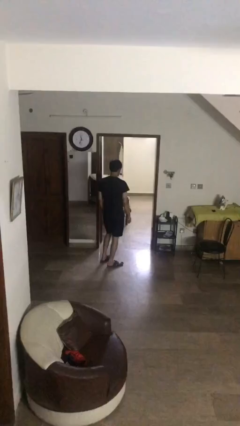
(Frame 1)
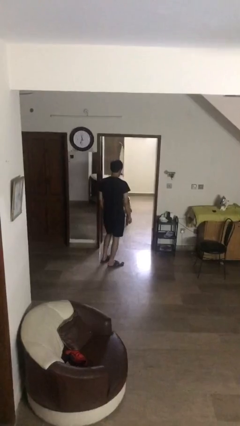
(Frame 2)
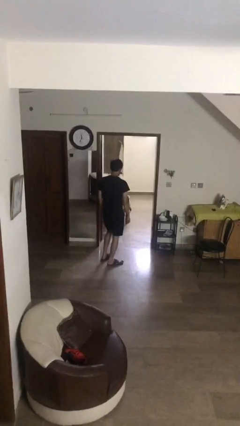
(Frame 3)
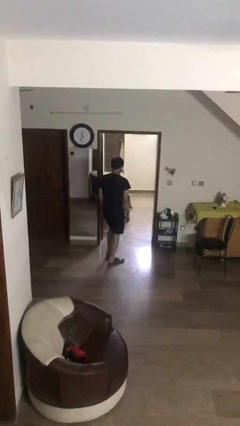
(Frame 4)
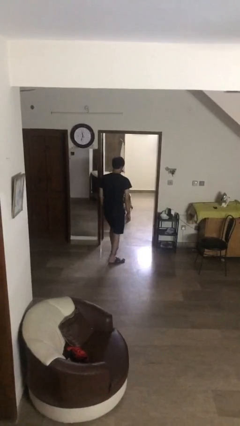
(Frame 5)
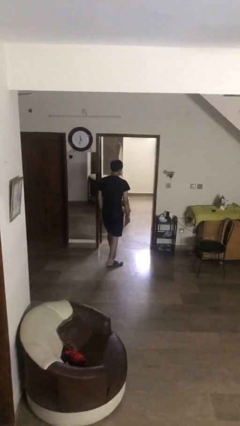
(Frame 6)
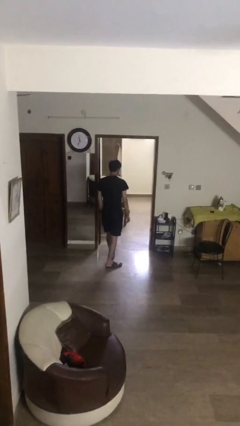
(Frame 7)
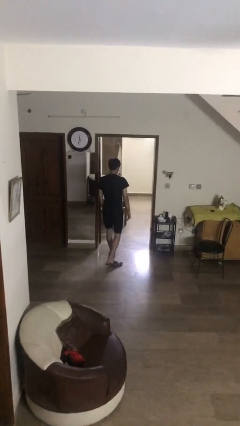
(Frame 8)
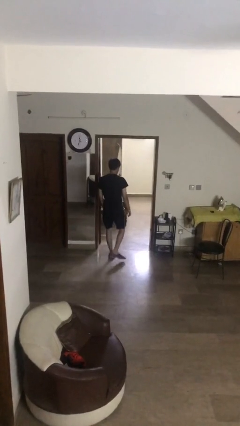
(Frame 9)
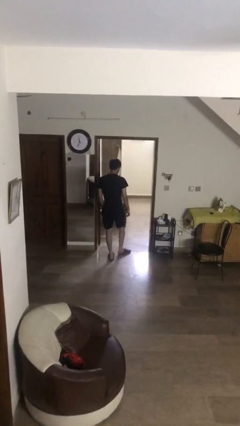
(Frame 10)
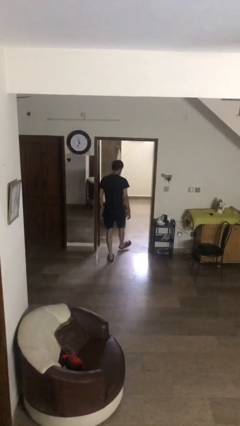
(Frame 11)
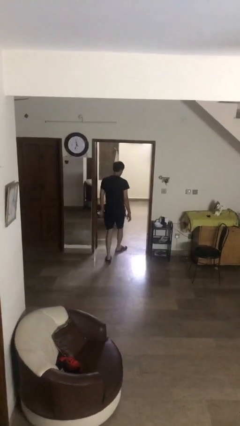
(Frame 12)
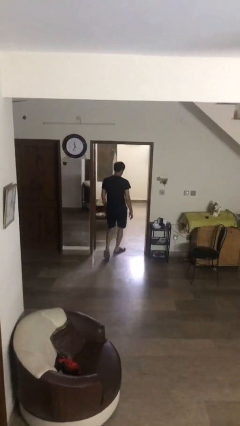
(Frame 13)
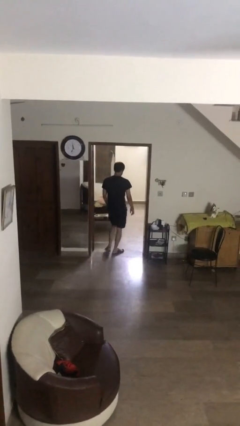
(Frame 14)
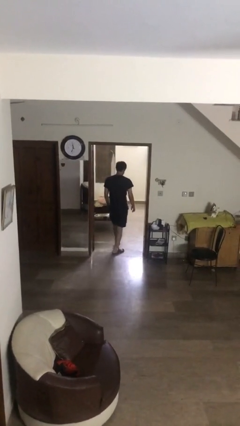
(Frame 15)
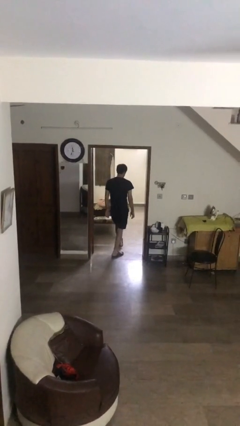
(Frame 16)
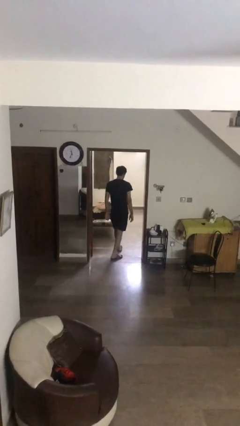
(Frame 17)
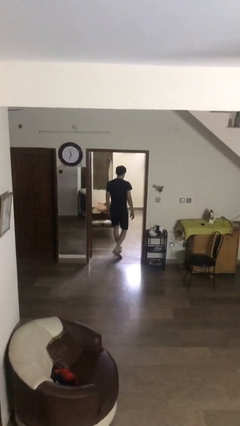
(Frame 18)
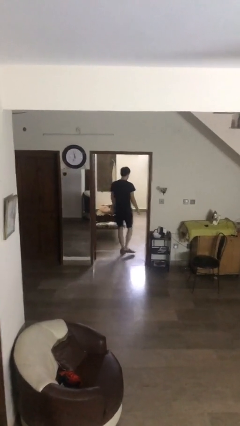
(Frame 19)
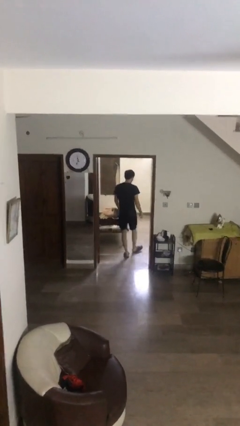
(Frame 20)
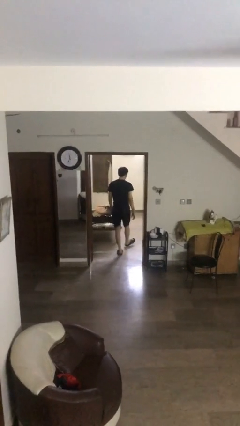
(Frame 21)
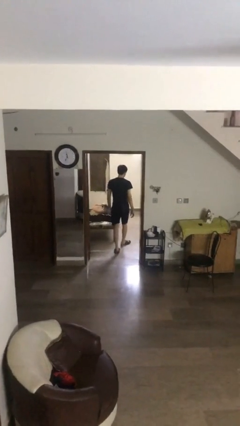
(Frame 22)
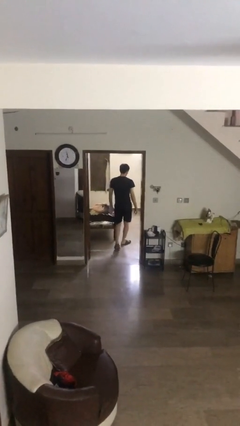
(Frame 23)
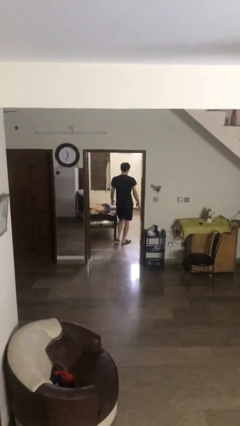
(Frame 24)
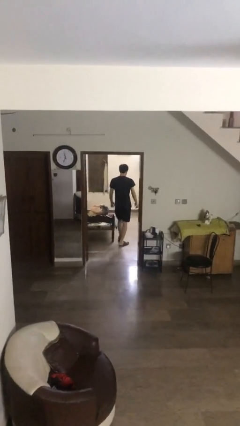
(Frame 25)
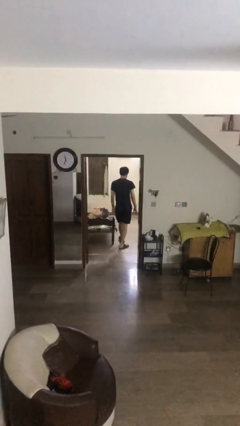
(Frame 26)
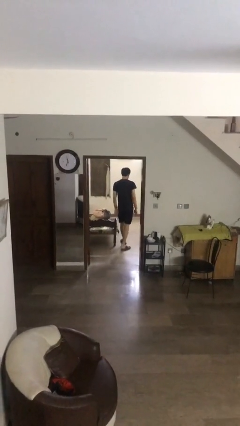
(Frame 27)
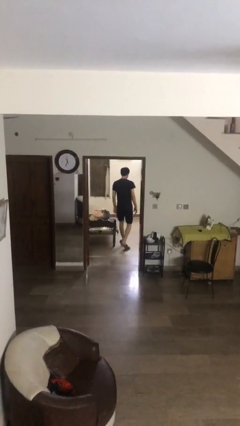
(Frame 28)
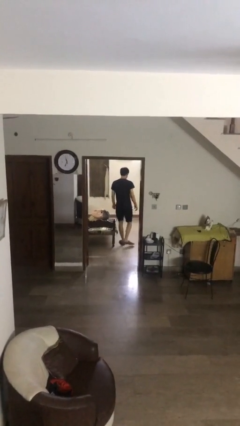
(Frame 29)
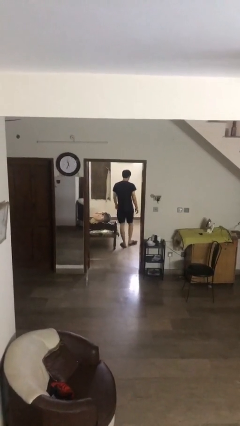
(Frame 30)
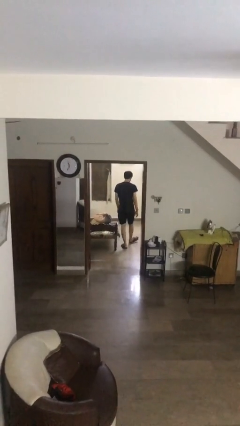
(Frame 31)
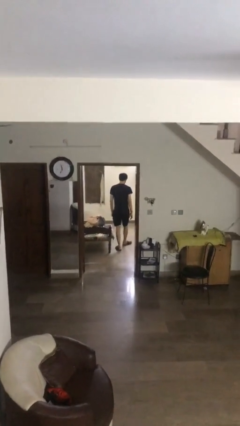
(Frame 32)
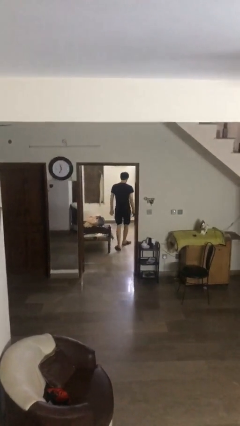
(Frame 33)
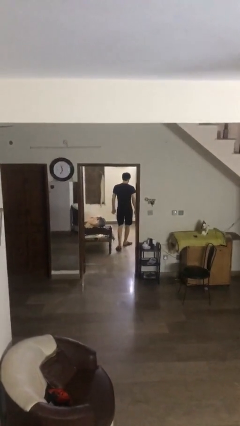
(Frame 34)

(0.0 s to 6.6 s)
person exits scene through structure

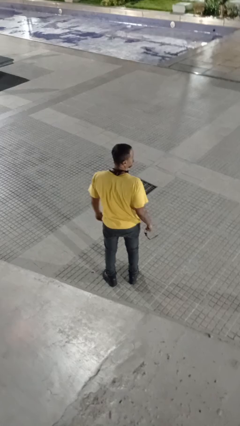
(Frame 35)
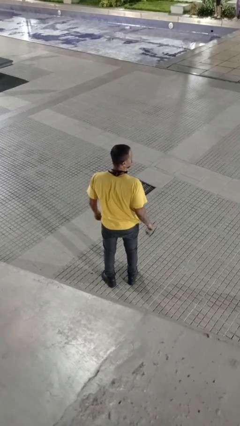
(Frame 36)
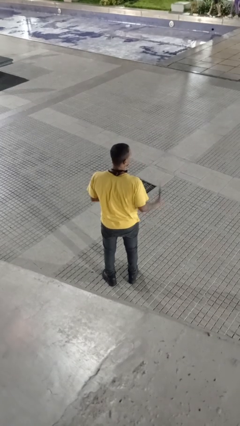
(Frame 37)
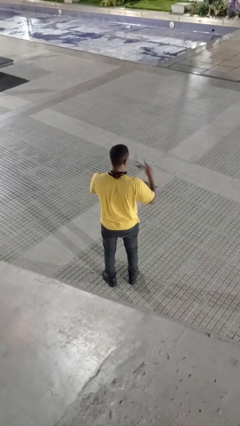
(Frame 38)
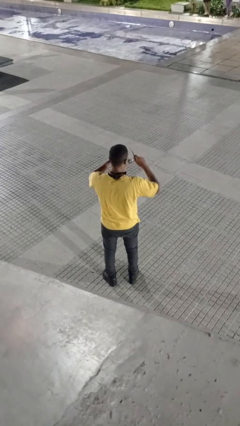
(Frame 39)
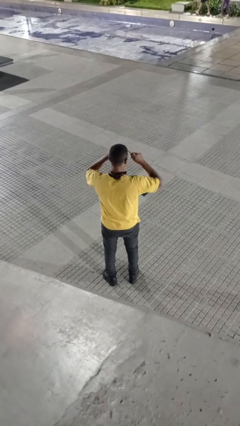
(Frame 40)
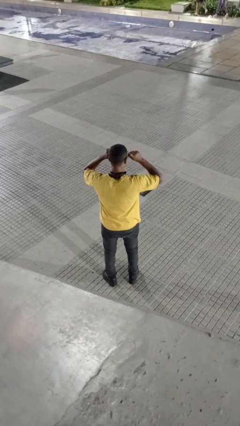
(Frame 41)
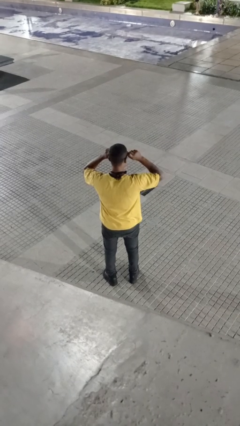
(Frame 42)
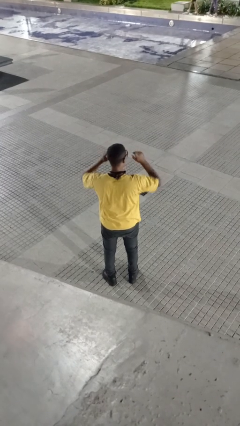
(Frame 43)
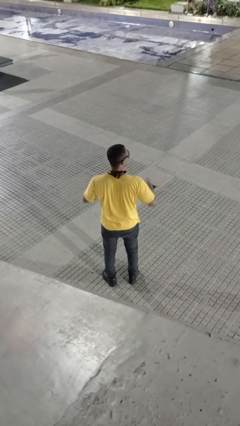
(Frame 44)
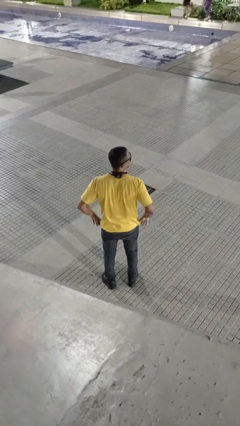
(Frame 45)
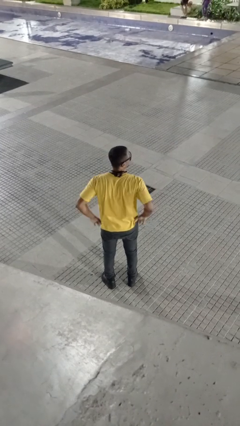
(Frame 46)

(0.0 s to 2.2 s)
person puts on glasses

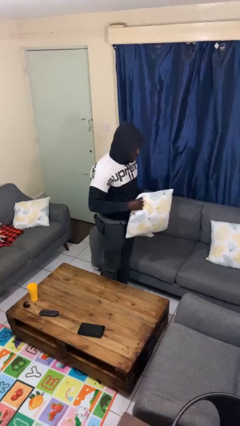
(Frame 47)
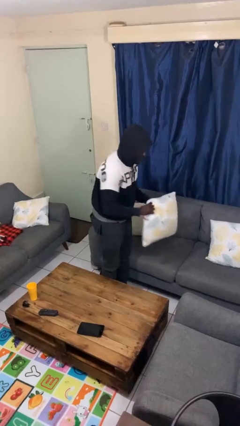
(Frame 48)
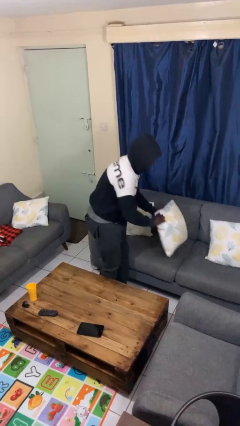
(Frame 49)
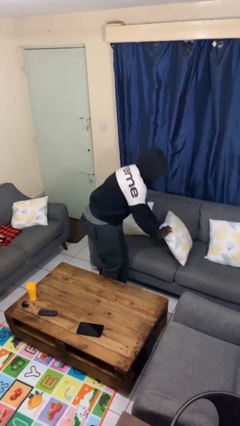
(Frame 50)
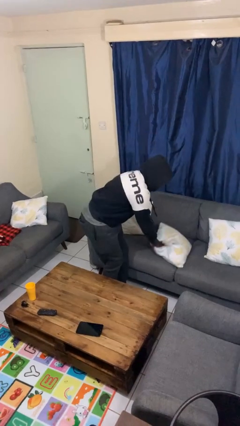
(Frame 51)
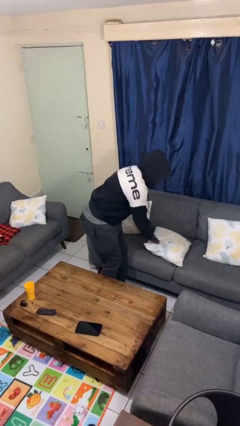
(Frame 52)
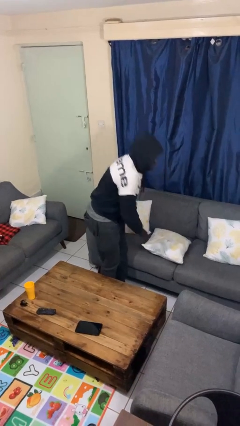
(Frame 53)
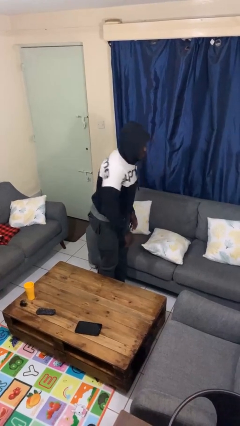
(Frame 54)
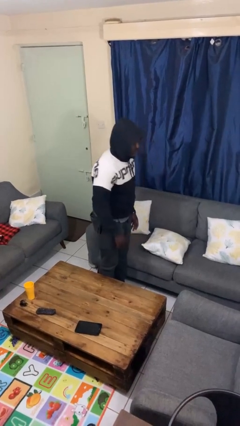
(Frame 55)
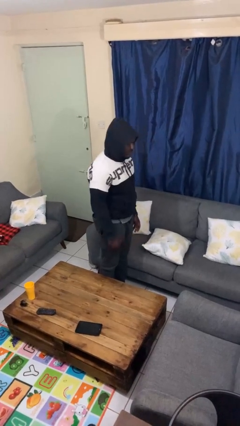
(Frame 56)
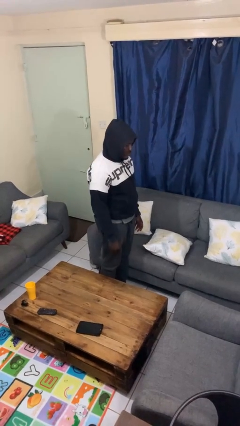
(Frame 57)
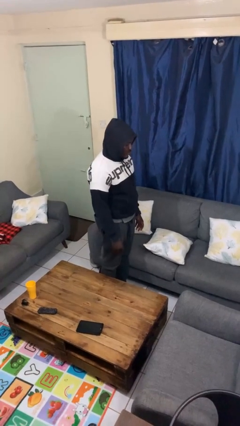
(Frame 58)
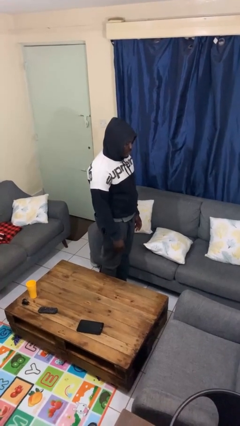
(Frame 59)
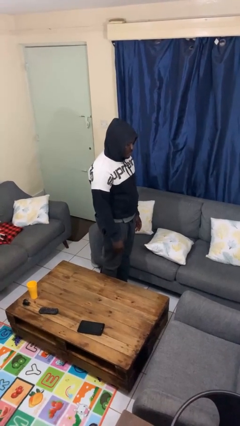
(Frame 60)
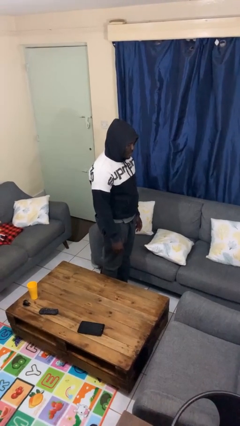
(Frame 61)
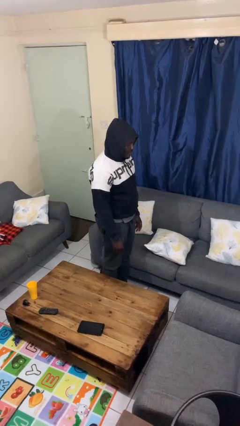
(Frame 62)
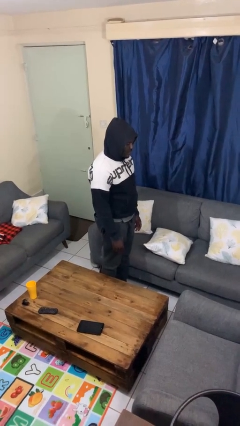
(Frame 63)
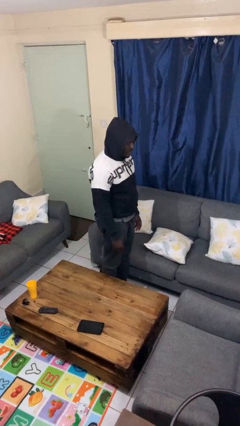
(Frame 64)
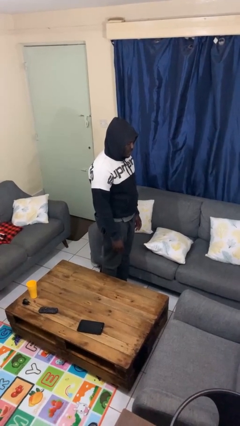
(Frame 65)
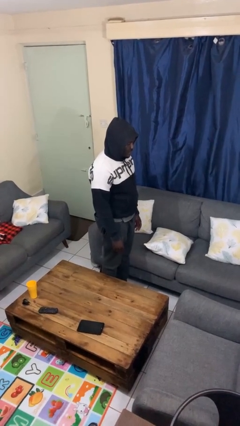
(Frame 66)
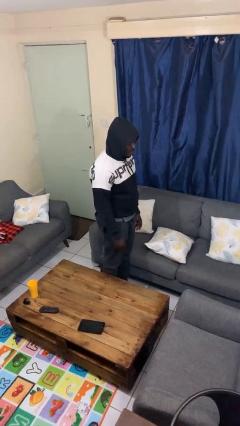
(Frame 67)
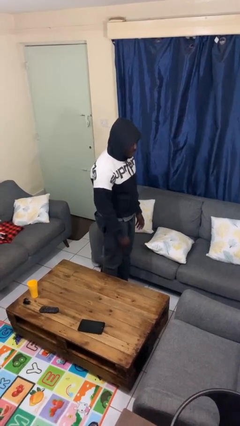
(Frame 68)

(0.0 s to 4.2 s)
person puts down object on couch

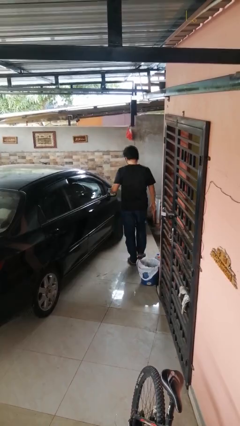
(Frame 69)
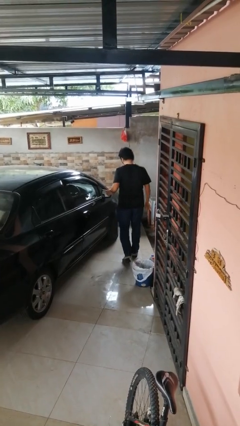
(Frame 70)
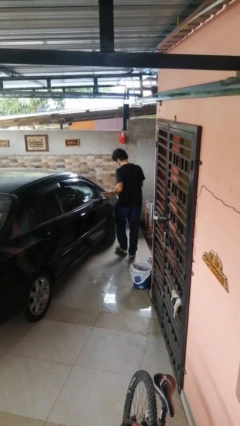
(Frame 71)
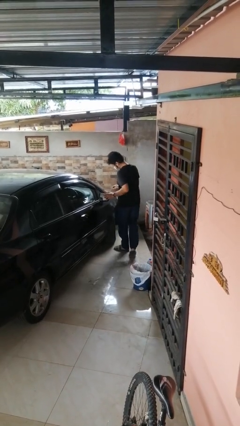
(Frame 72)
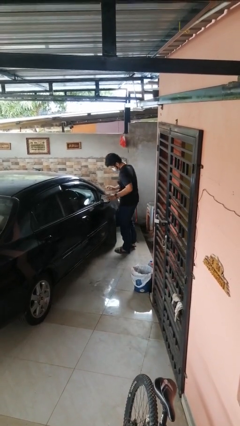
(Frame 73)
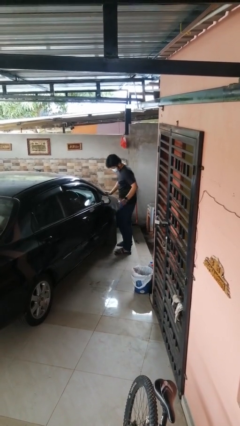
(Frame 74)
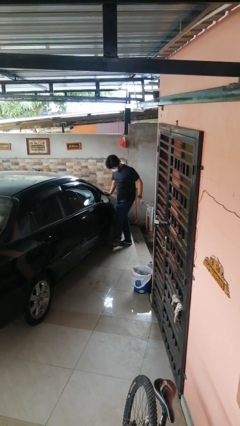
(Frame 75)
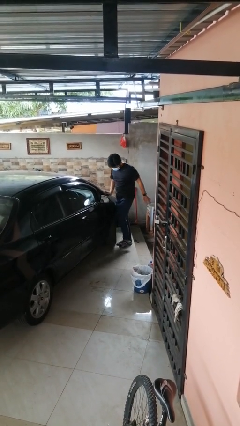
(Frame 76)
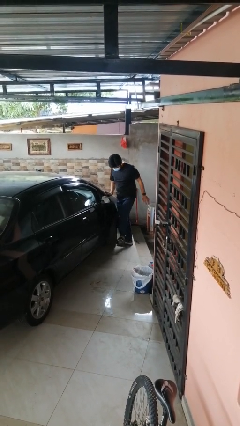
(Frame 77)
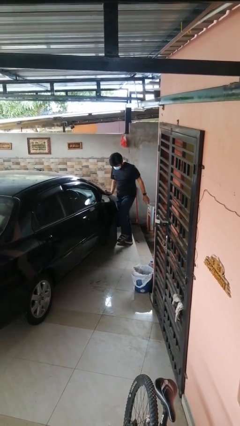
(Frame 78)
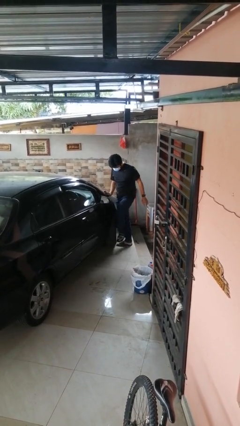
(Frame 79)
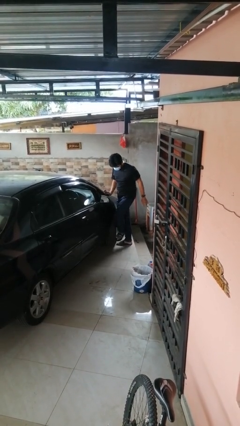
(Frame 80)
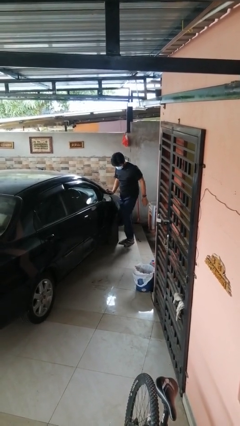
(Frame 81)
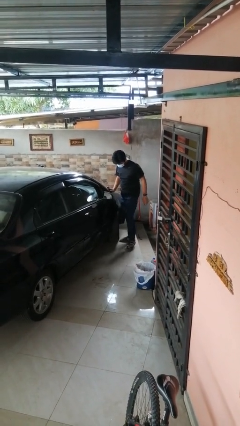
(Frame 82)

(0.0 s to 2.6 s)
person kicks car tires

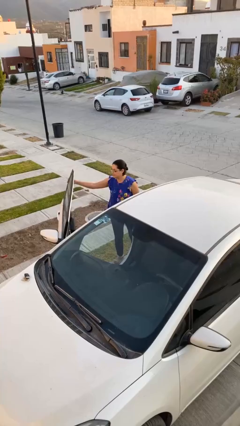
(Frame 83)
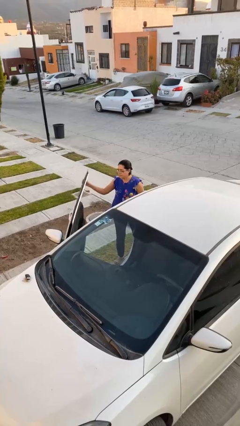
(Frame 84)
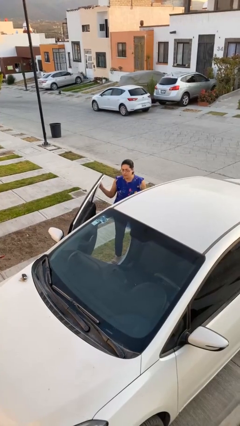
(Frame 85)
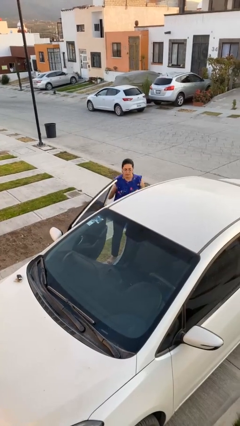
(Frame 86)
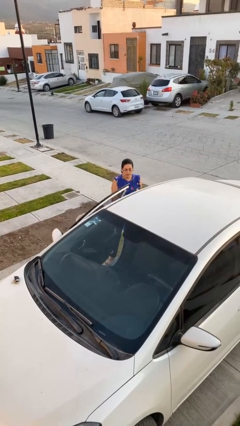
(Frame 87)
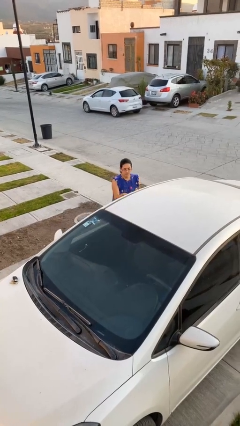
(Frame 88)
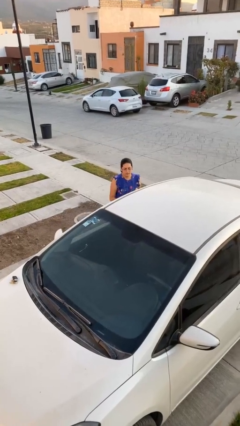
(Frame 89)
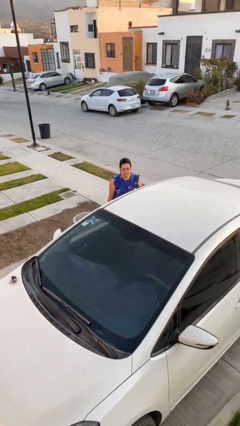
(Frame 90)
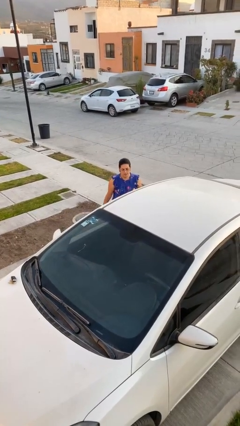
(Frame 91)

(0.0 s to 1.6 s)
person closes car door
